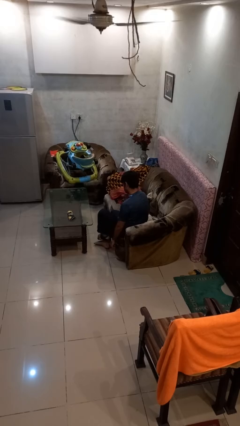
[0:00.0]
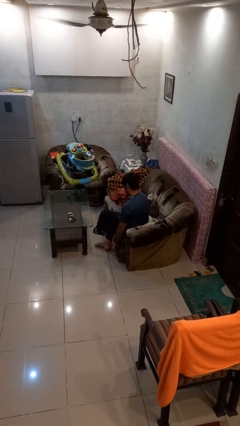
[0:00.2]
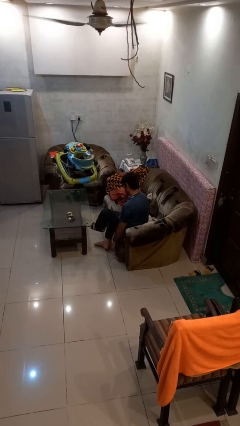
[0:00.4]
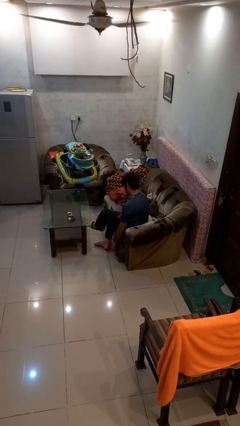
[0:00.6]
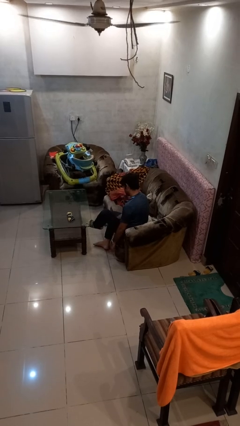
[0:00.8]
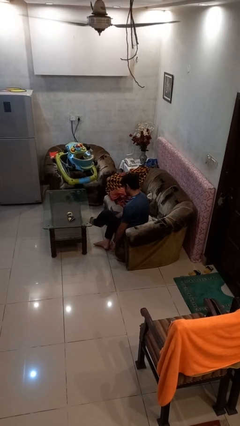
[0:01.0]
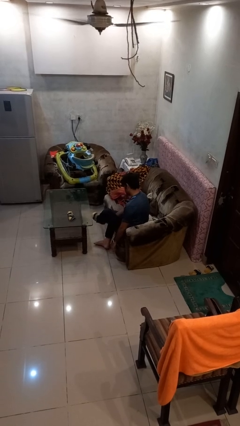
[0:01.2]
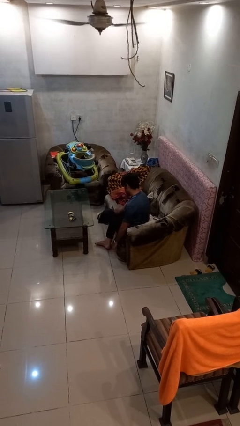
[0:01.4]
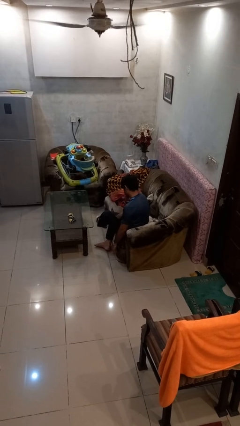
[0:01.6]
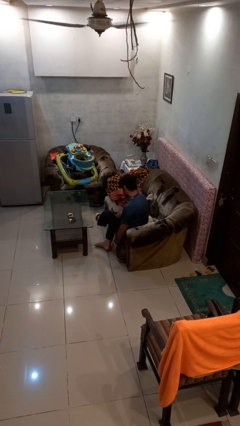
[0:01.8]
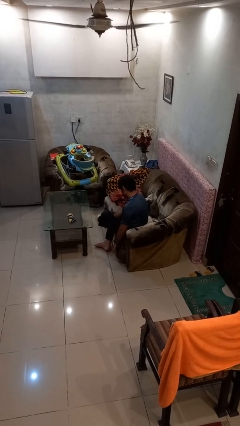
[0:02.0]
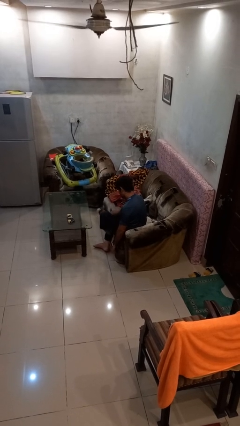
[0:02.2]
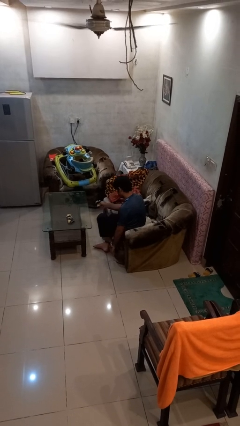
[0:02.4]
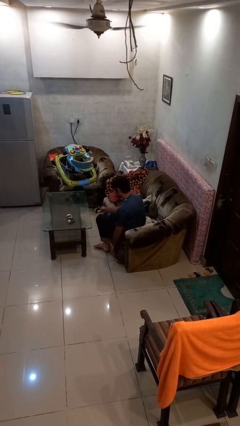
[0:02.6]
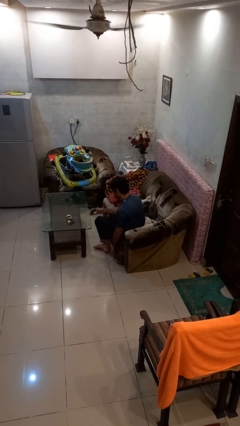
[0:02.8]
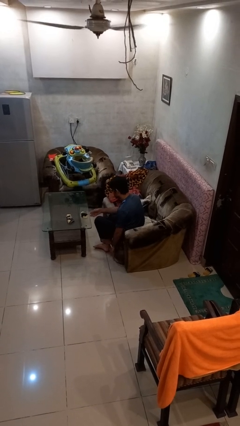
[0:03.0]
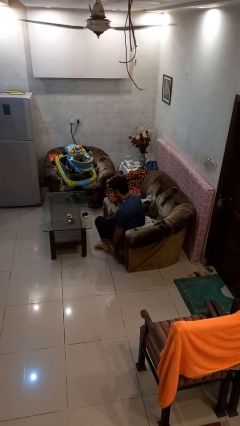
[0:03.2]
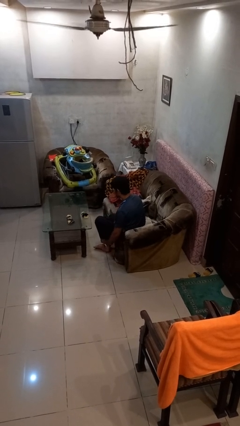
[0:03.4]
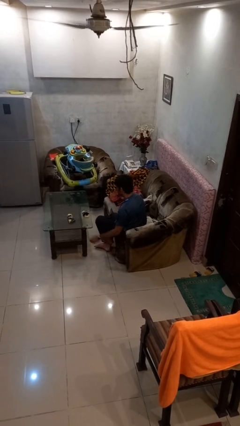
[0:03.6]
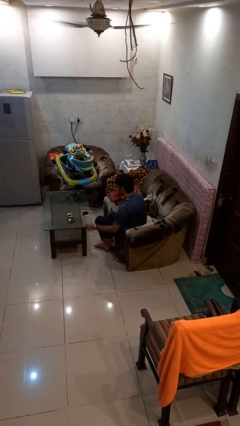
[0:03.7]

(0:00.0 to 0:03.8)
person takes off socks

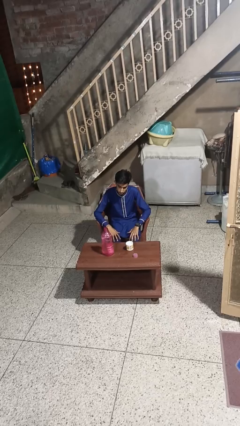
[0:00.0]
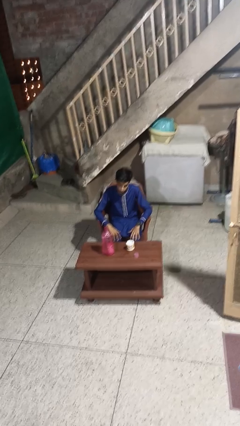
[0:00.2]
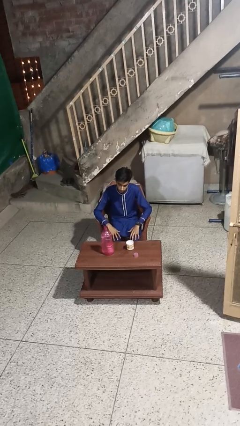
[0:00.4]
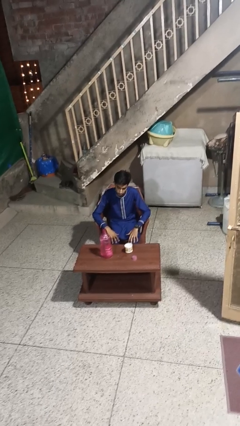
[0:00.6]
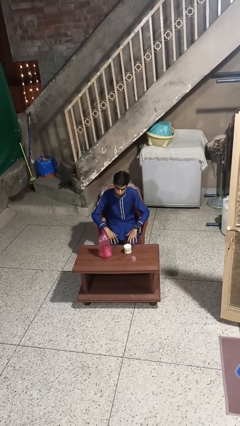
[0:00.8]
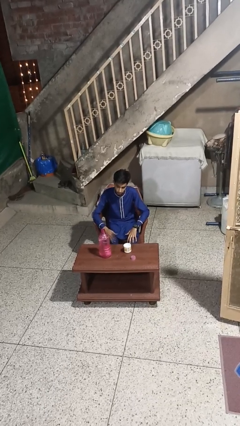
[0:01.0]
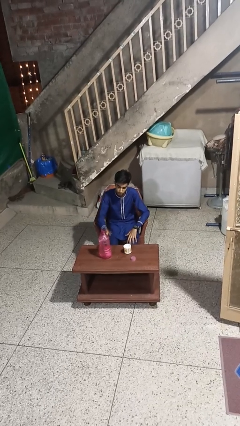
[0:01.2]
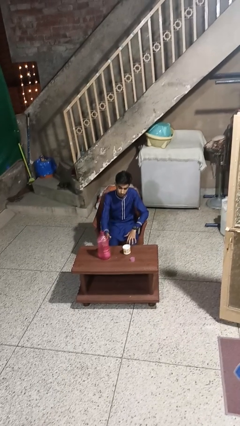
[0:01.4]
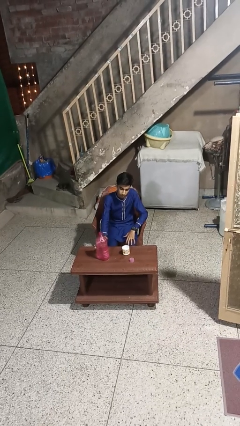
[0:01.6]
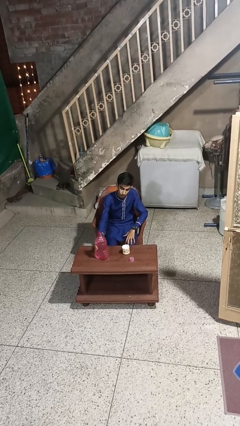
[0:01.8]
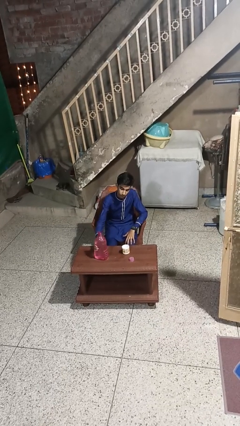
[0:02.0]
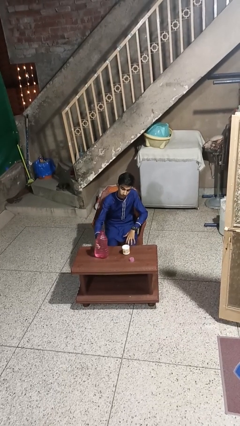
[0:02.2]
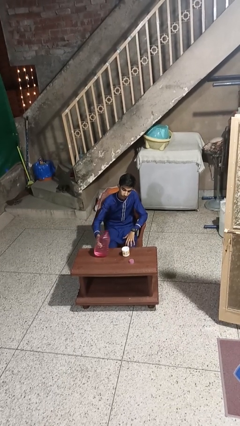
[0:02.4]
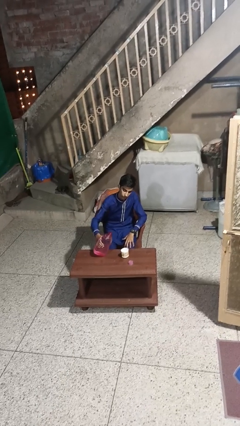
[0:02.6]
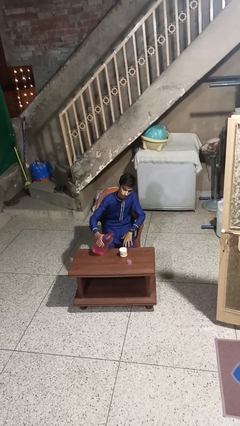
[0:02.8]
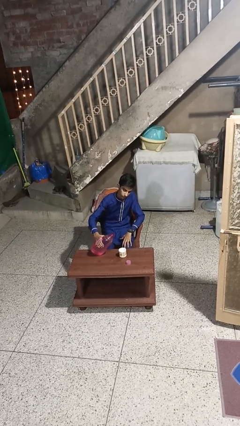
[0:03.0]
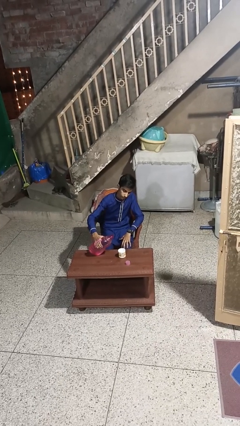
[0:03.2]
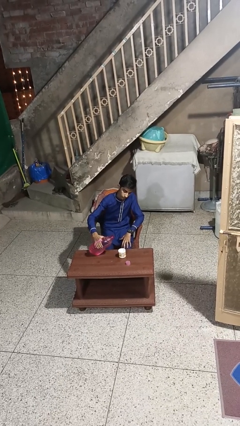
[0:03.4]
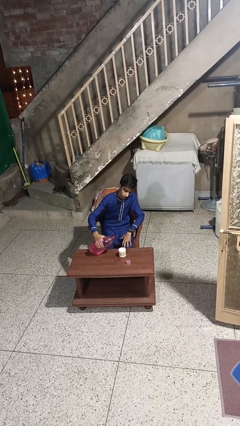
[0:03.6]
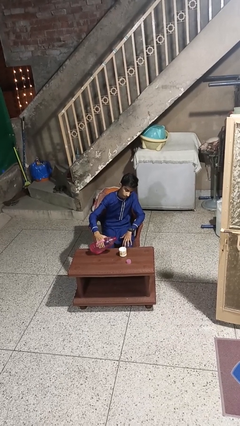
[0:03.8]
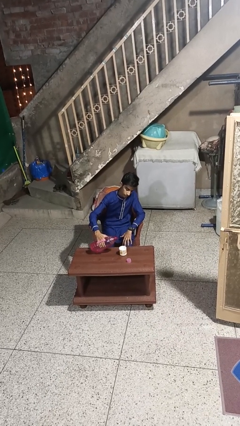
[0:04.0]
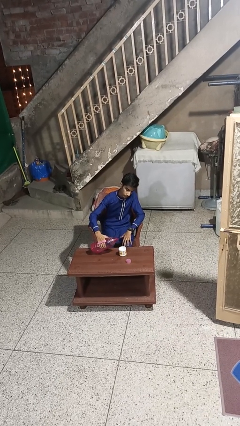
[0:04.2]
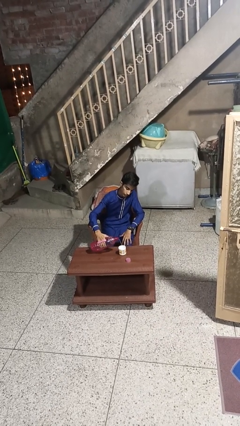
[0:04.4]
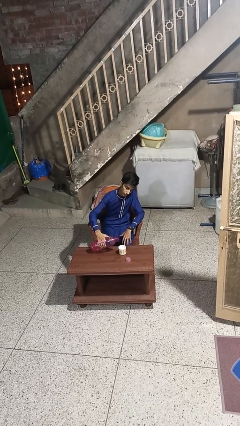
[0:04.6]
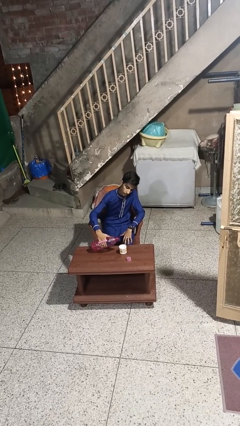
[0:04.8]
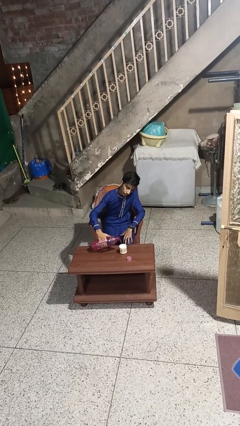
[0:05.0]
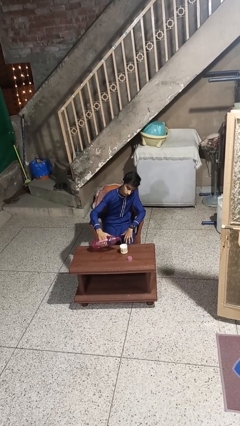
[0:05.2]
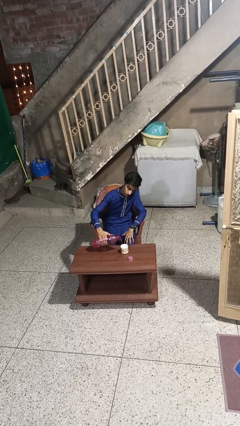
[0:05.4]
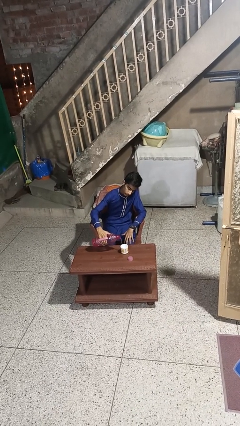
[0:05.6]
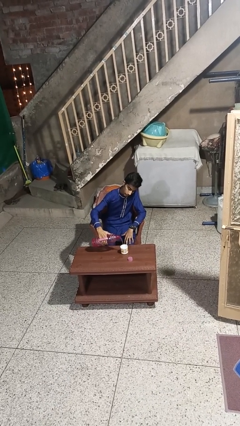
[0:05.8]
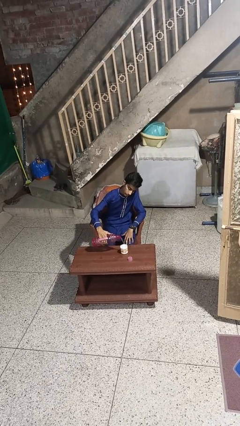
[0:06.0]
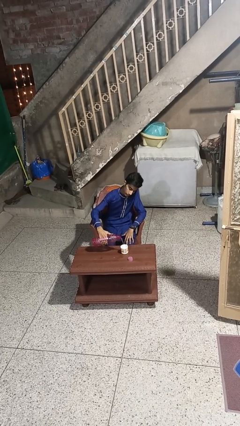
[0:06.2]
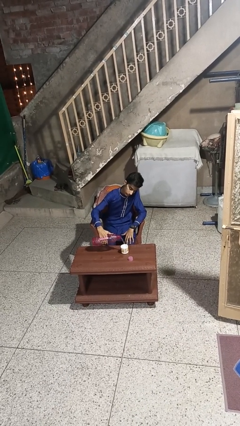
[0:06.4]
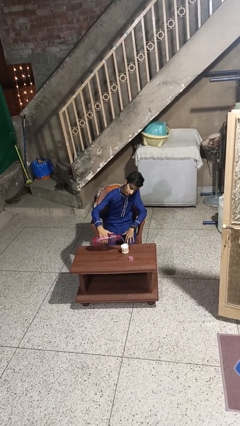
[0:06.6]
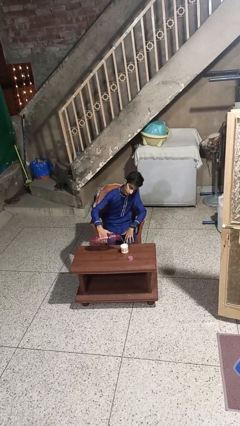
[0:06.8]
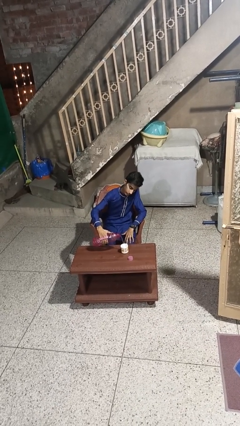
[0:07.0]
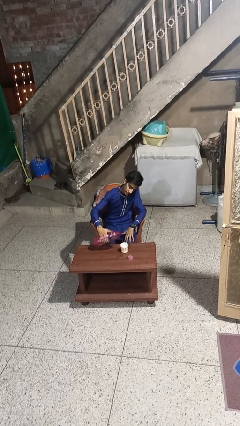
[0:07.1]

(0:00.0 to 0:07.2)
person pours liquid into cup

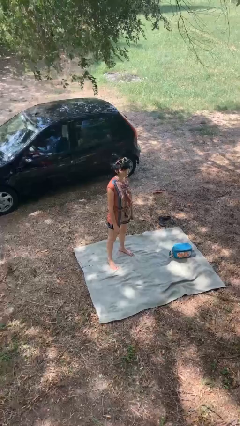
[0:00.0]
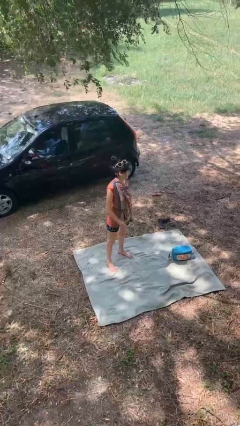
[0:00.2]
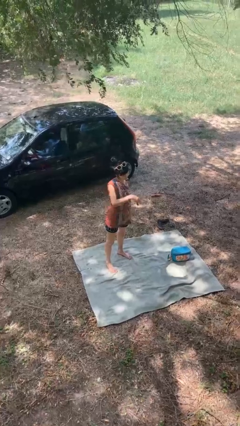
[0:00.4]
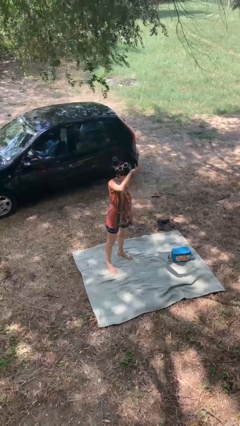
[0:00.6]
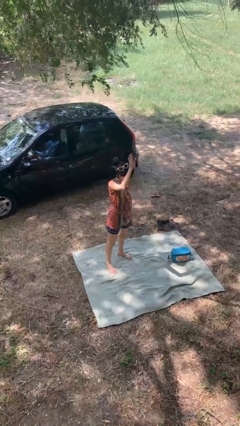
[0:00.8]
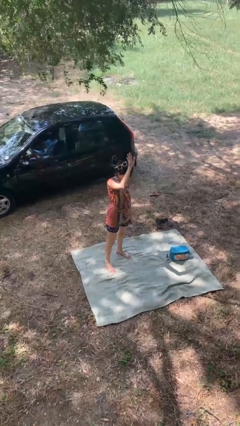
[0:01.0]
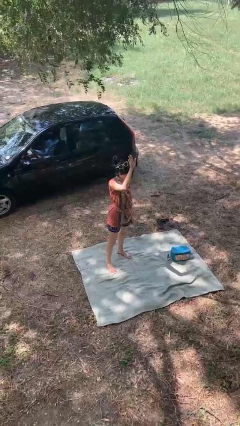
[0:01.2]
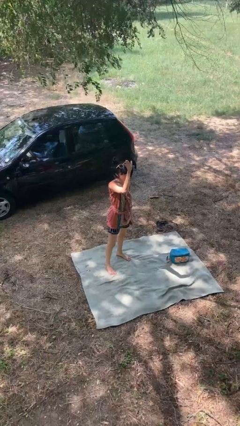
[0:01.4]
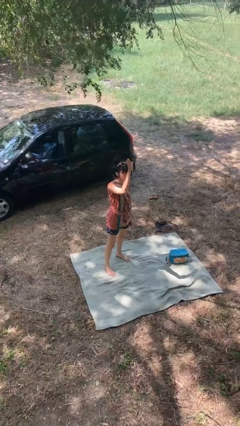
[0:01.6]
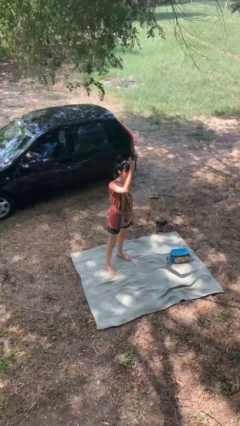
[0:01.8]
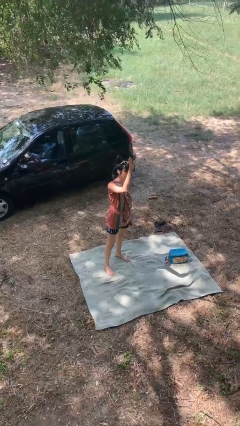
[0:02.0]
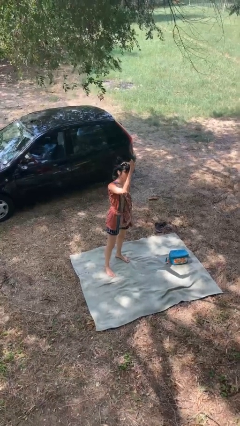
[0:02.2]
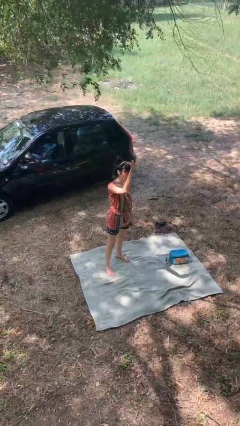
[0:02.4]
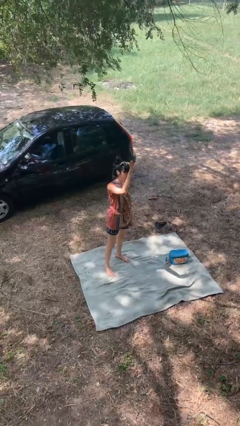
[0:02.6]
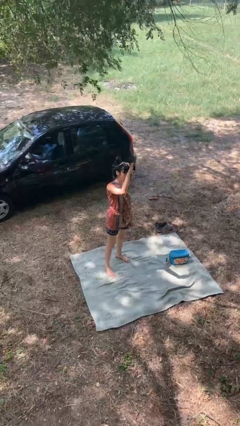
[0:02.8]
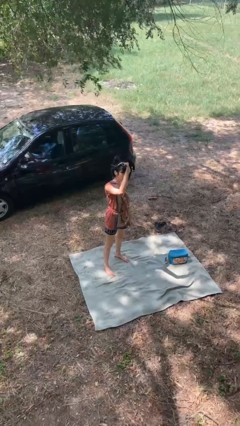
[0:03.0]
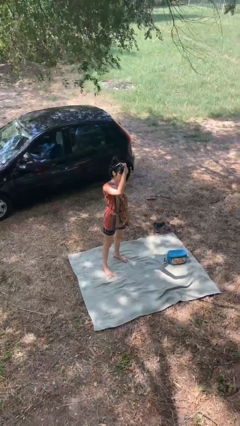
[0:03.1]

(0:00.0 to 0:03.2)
person gestures raise hand

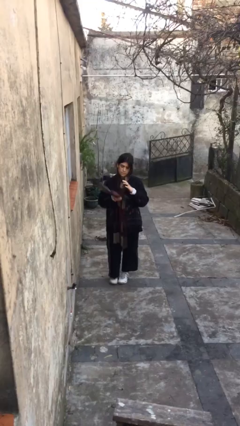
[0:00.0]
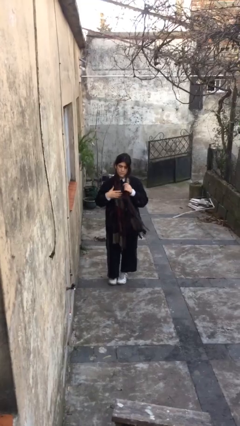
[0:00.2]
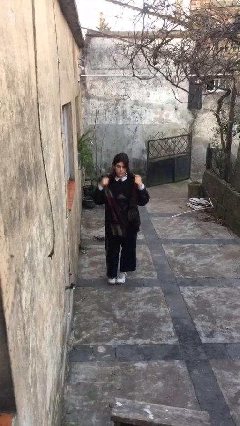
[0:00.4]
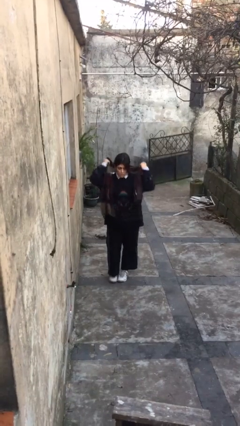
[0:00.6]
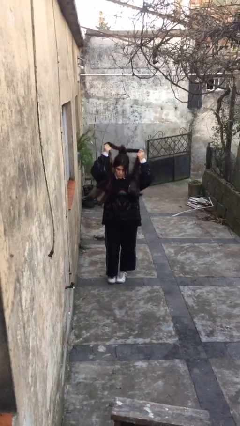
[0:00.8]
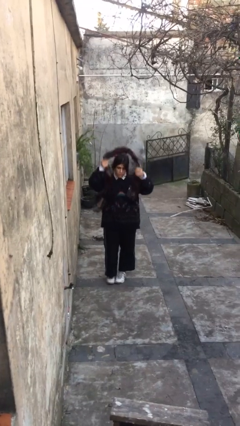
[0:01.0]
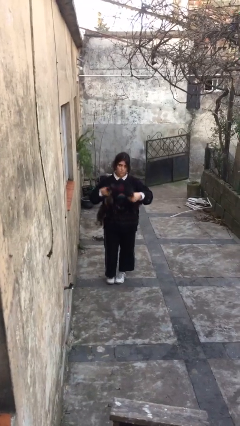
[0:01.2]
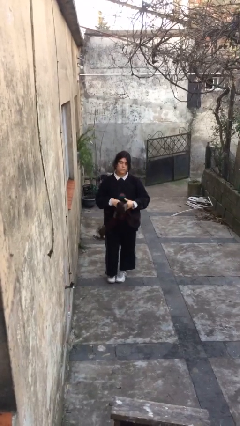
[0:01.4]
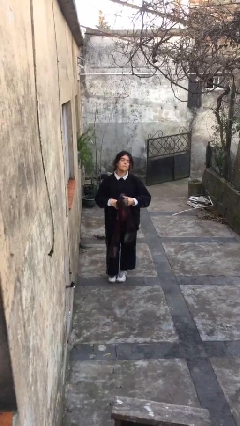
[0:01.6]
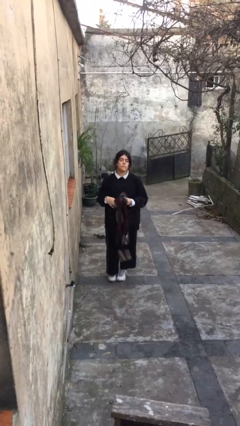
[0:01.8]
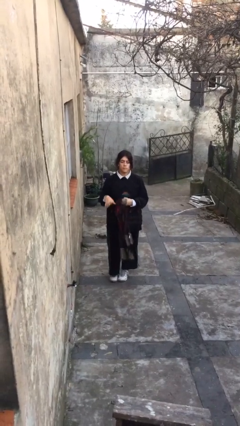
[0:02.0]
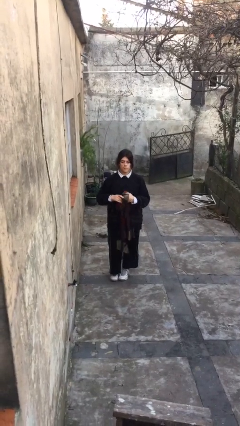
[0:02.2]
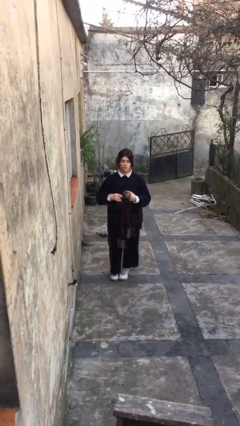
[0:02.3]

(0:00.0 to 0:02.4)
person takes off scarf

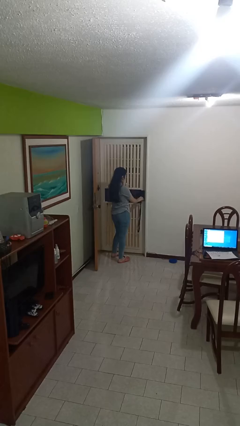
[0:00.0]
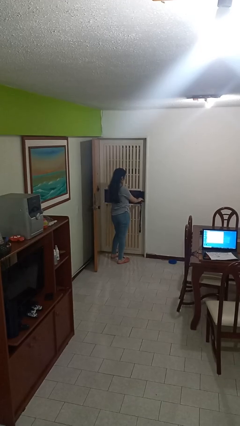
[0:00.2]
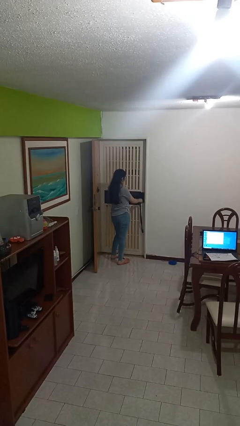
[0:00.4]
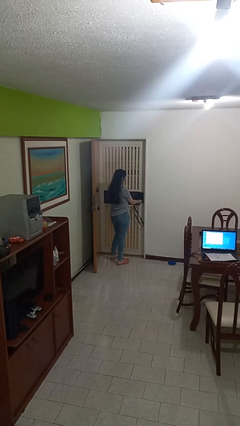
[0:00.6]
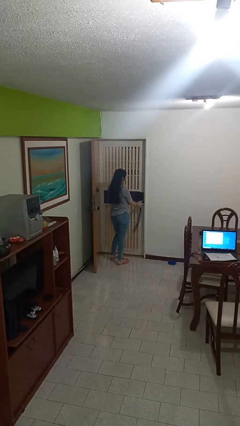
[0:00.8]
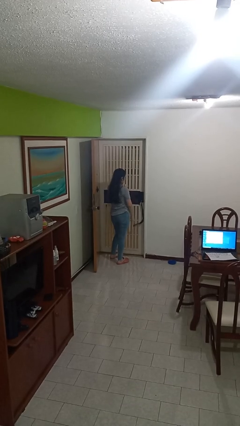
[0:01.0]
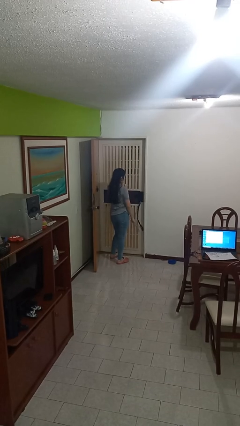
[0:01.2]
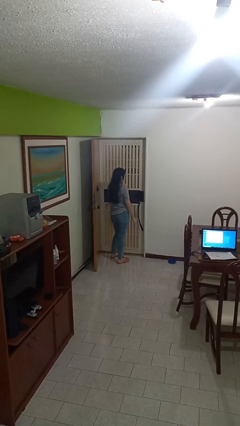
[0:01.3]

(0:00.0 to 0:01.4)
person locks door with keys
